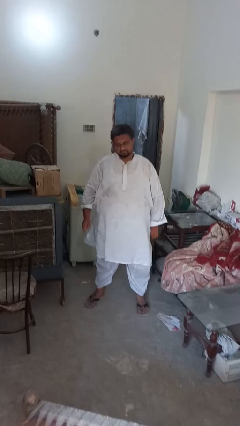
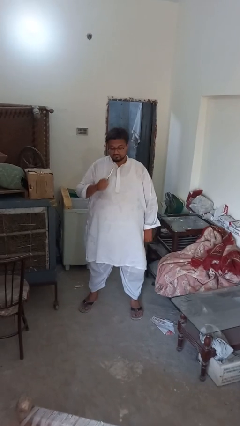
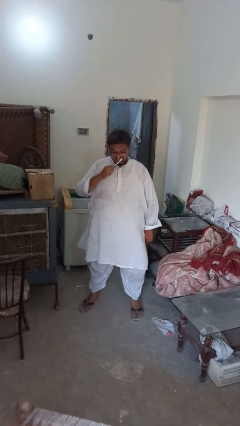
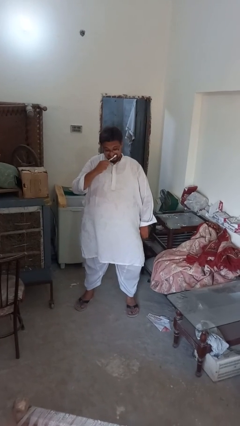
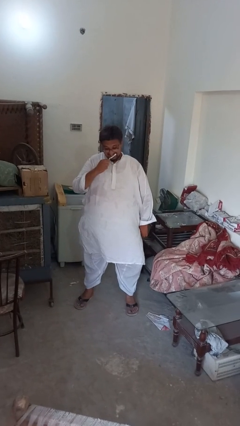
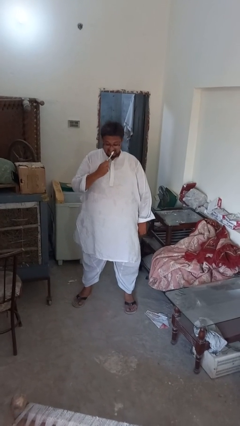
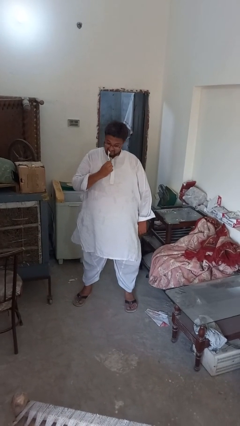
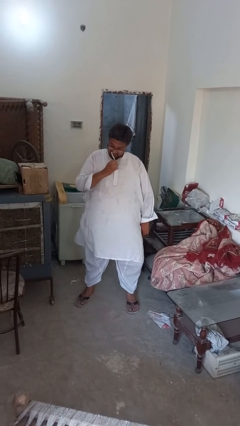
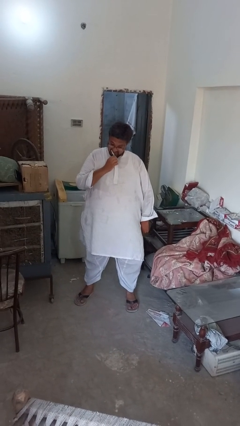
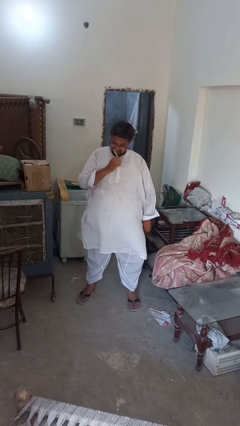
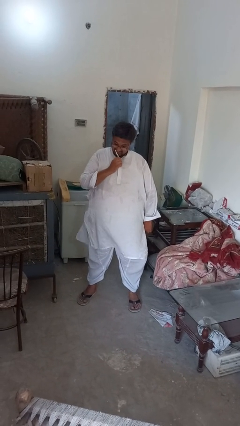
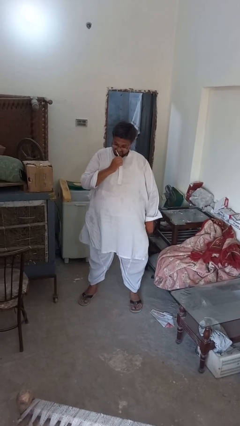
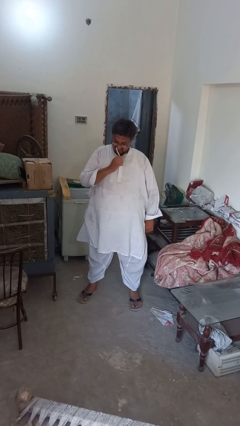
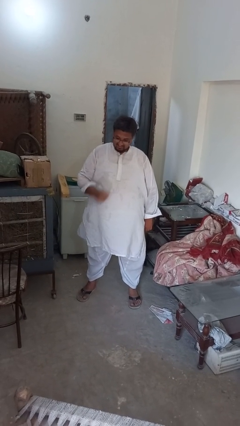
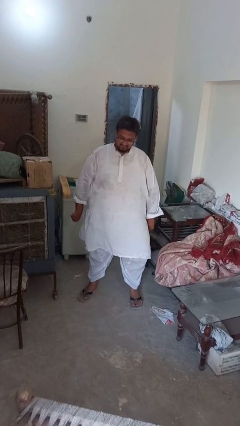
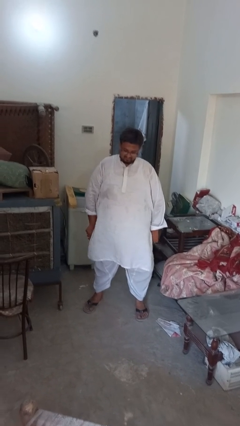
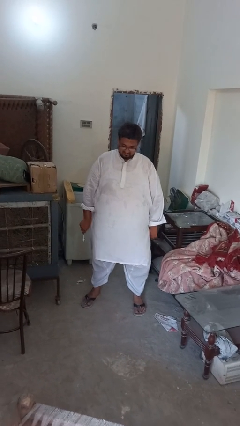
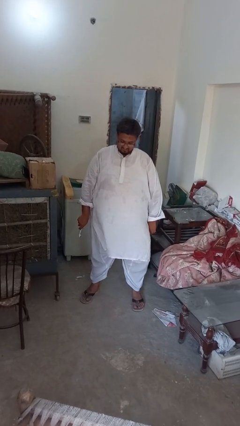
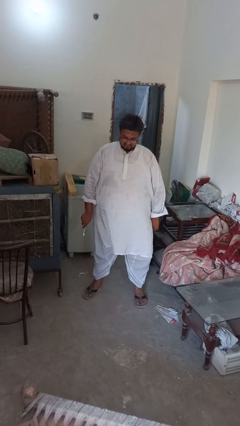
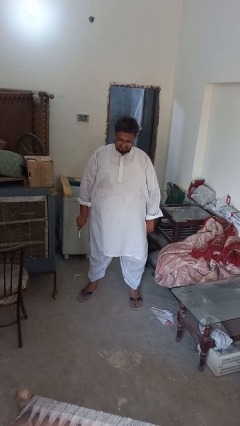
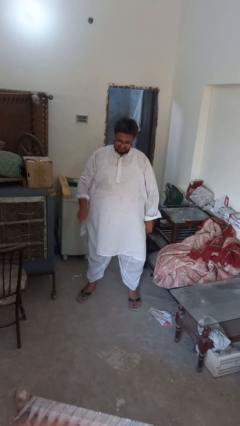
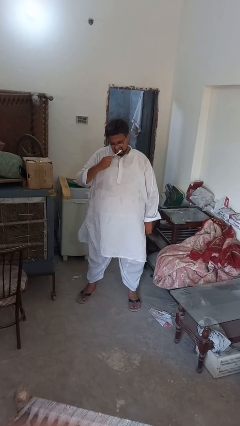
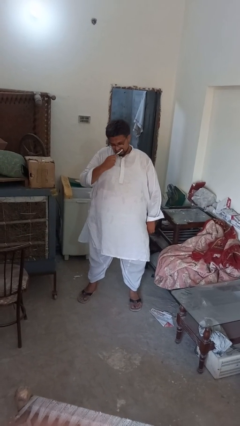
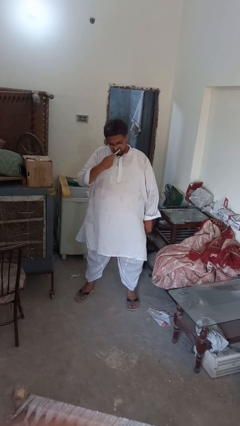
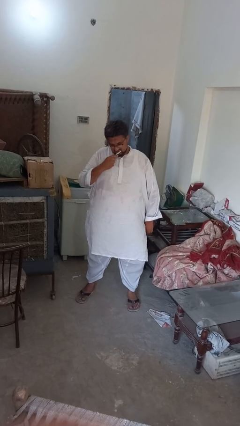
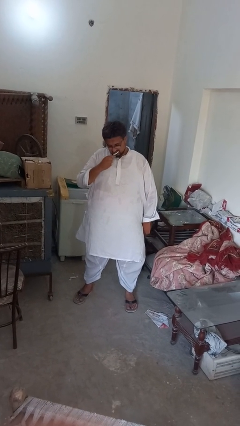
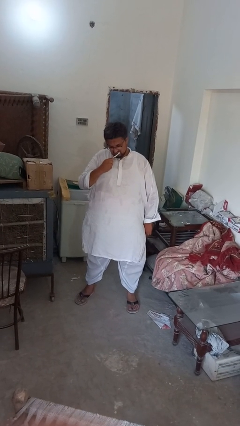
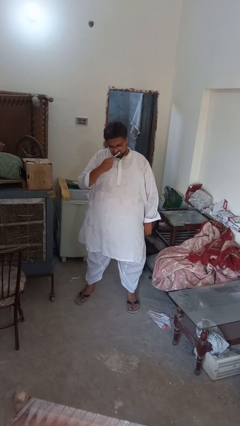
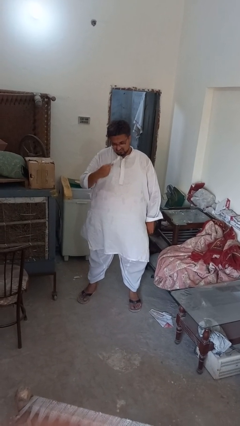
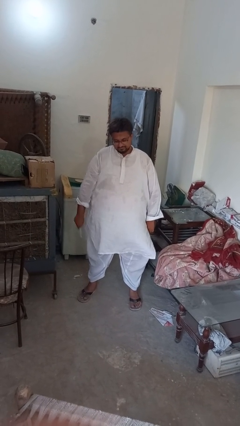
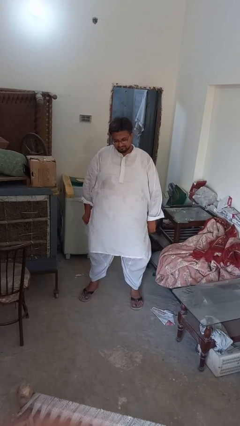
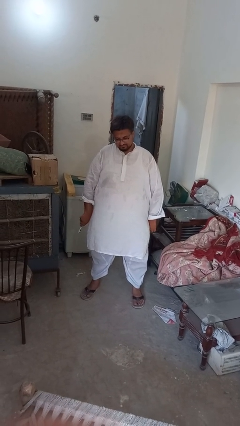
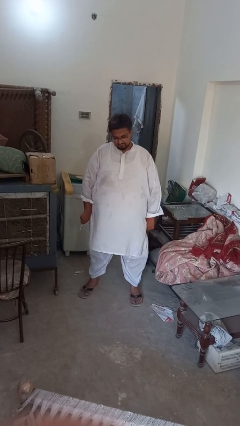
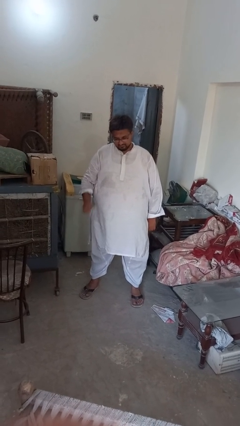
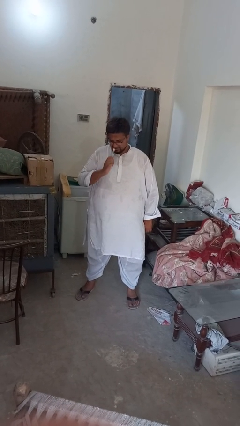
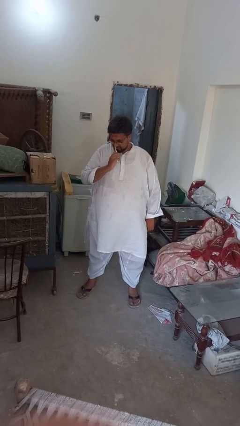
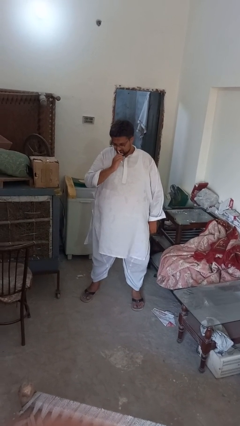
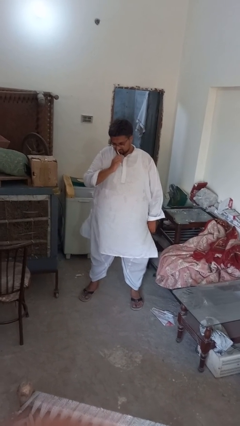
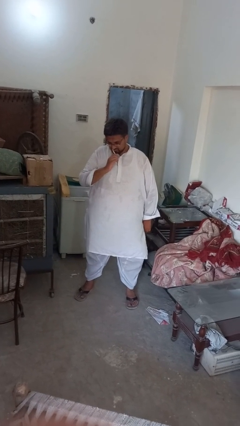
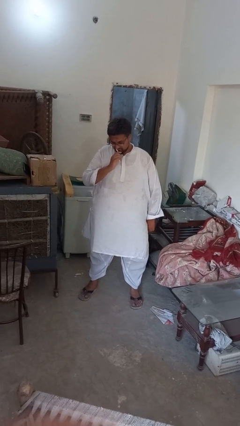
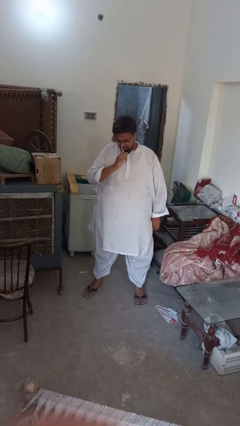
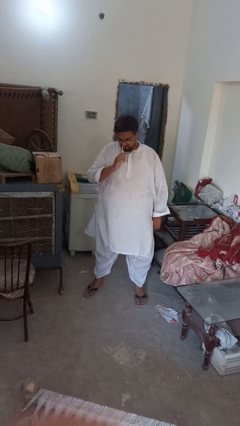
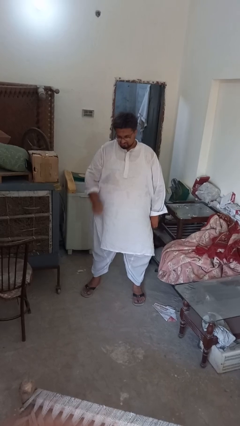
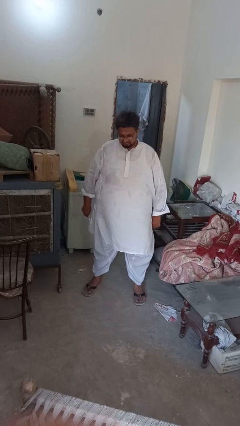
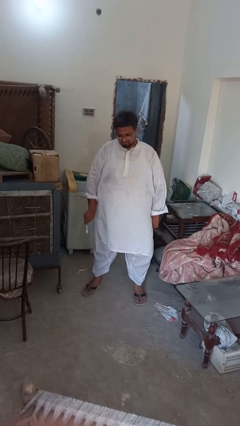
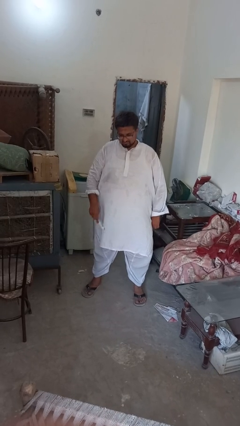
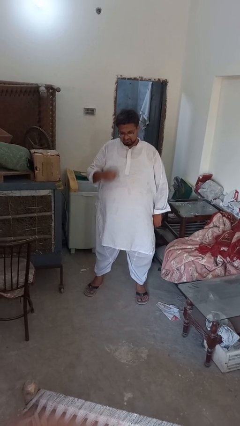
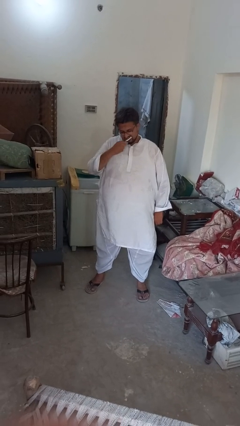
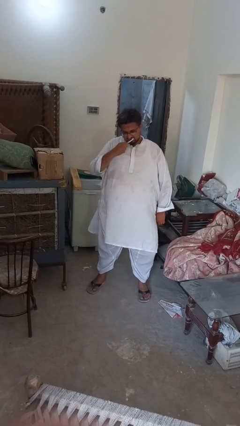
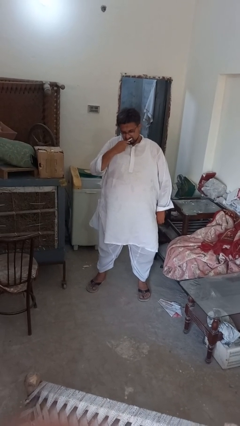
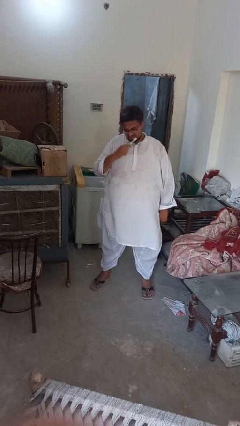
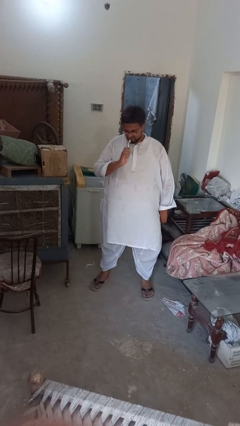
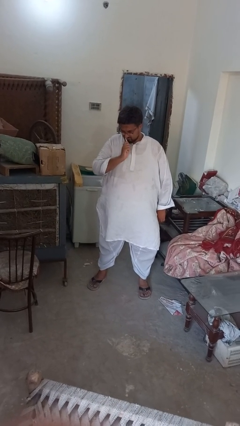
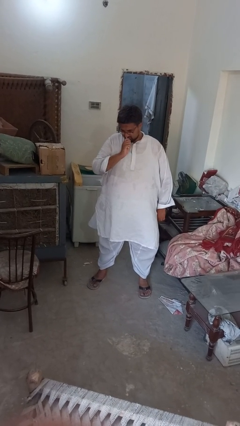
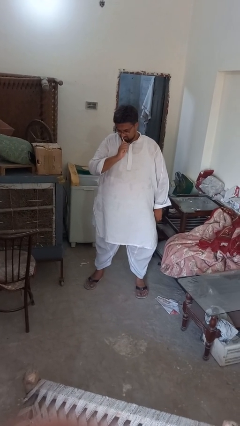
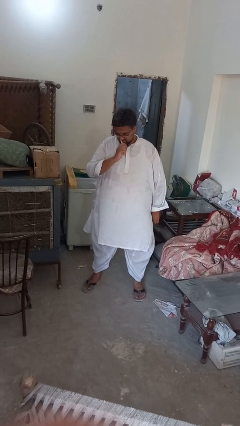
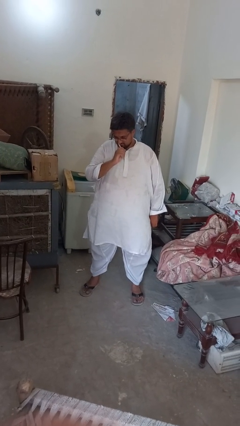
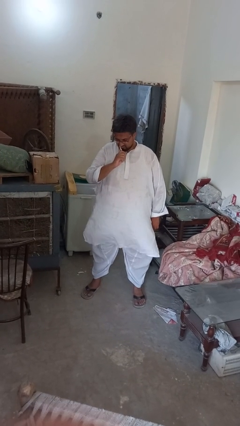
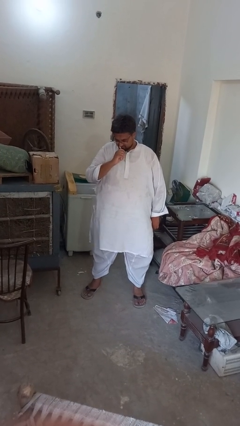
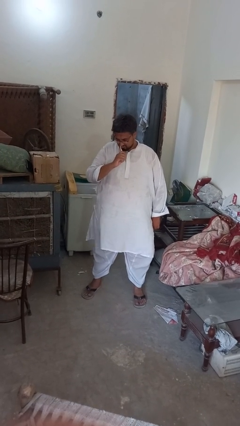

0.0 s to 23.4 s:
person brushes teeth

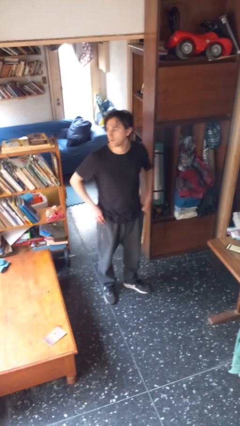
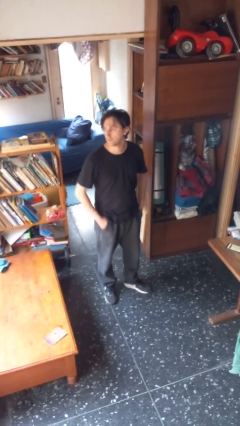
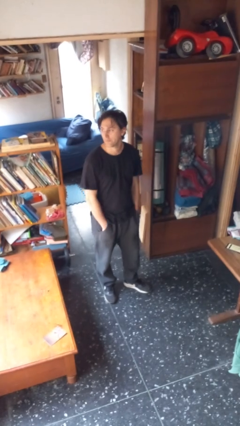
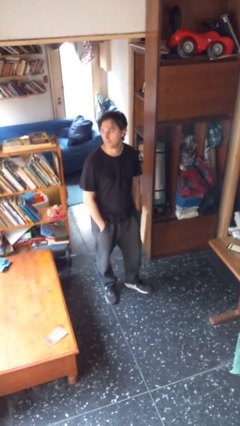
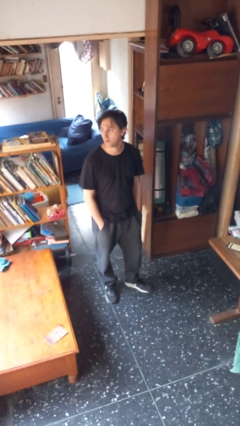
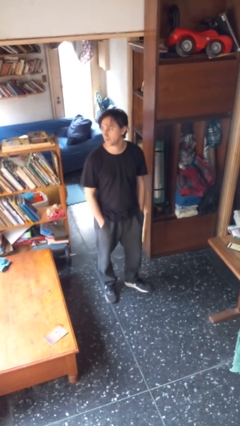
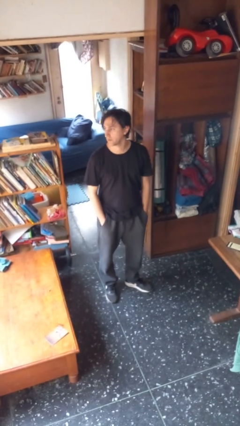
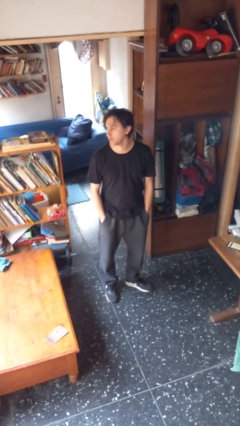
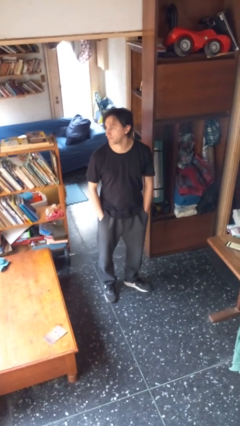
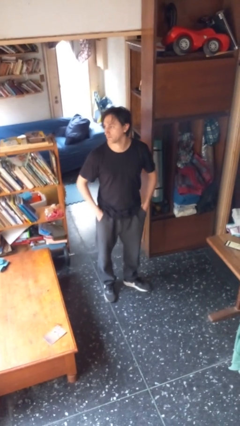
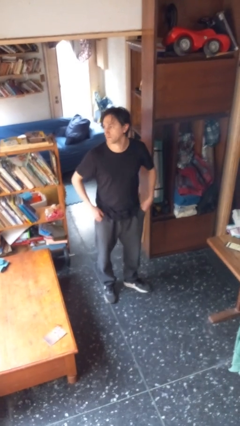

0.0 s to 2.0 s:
person puts hands in back pockets

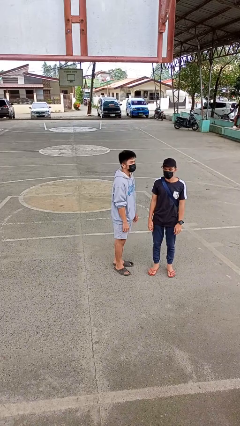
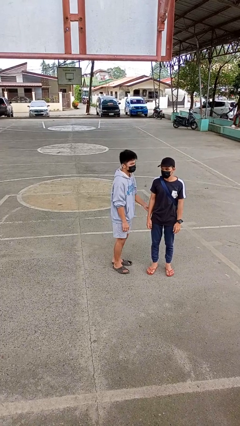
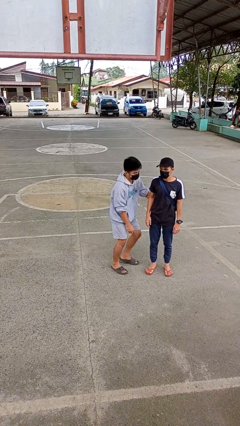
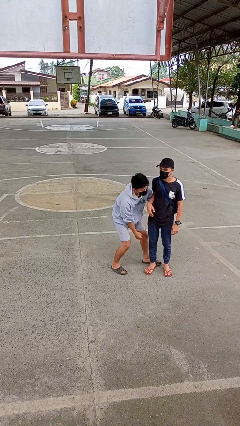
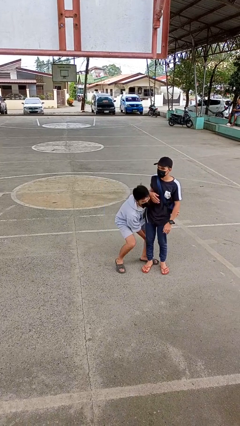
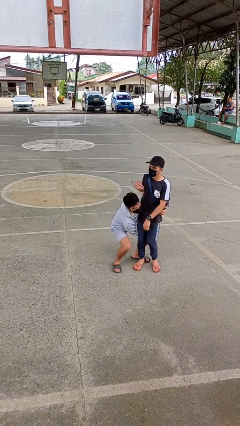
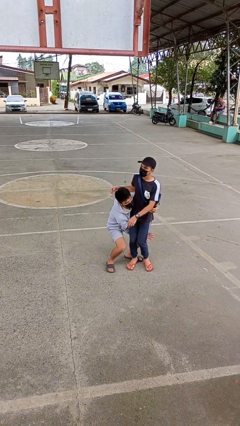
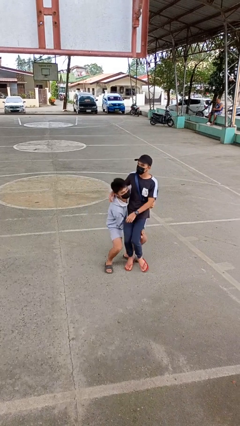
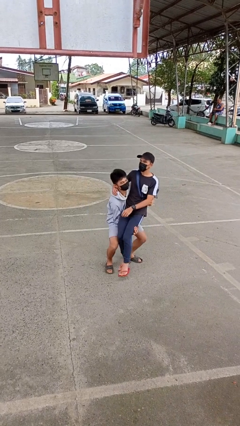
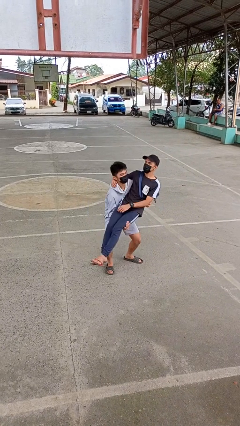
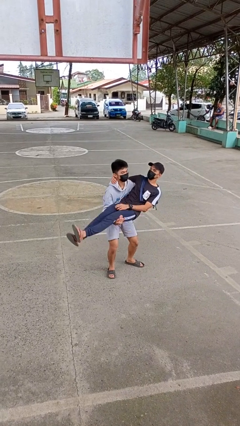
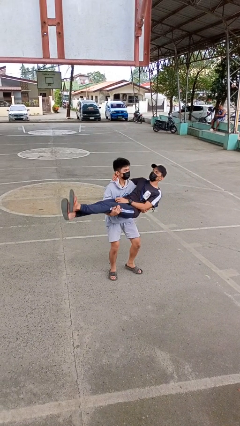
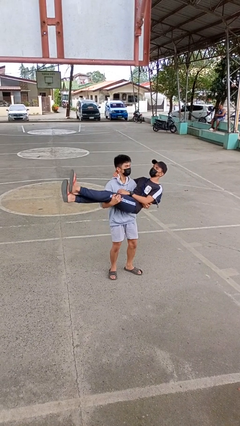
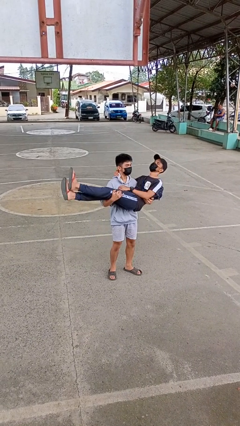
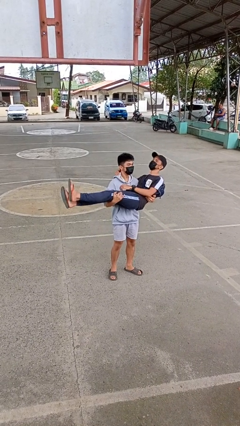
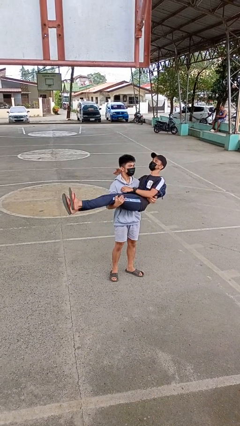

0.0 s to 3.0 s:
person picks up person

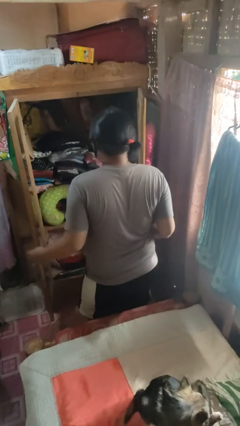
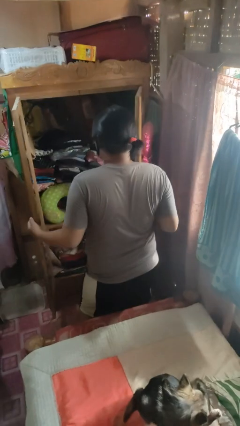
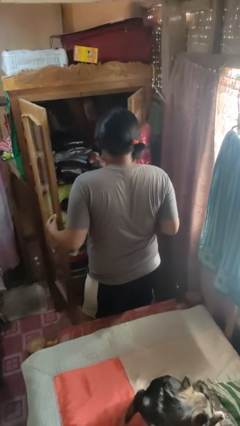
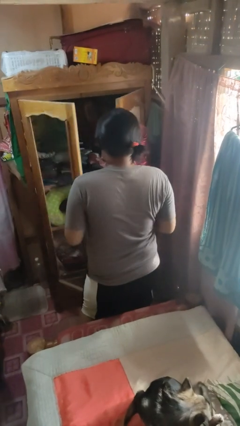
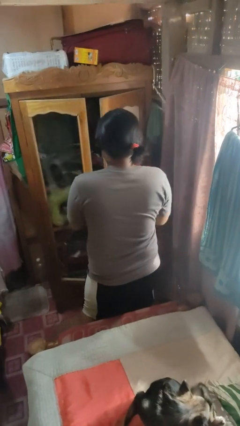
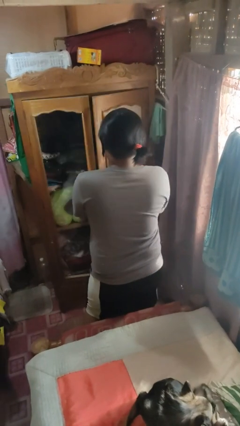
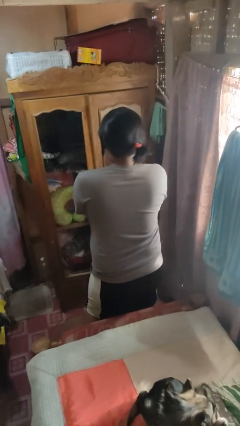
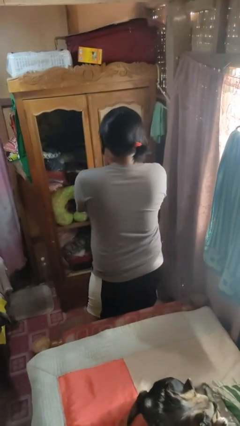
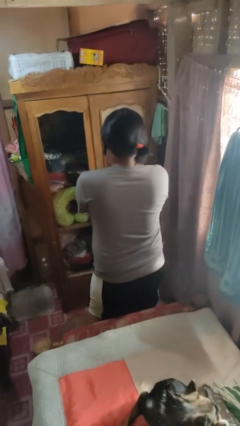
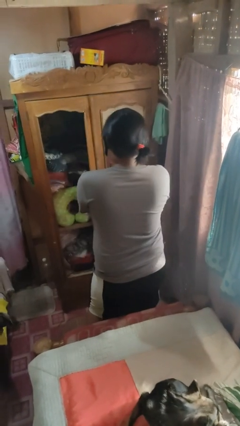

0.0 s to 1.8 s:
person closes closet door
